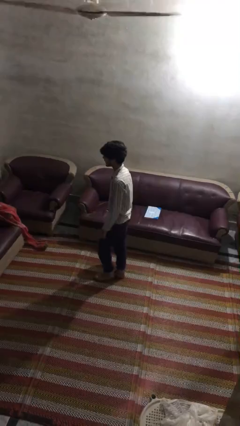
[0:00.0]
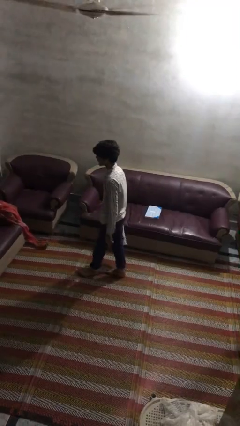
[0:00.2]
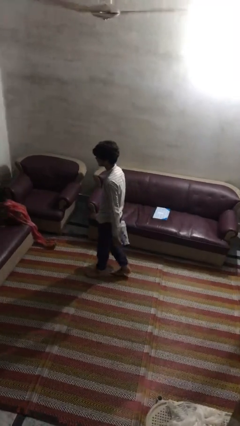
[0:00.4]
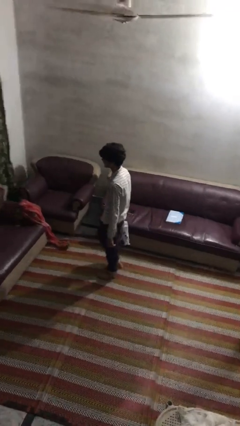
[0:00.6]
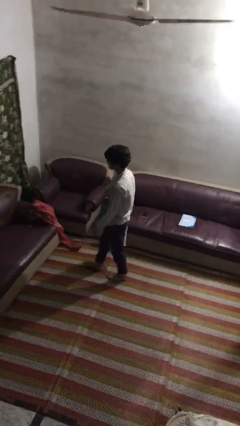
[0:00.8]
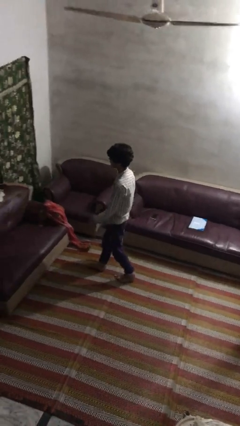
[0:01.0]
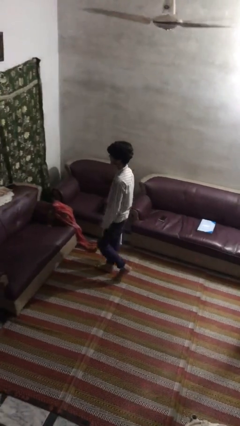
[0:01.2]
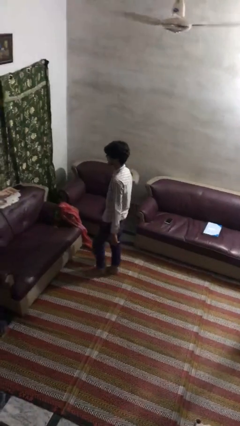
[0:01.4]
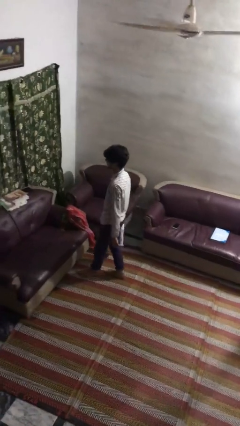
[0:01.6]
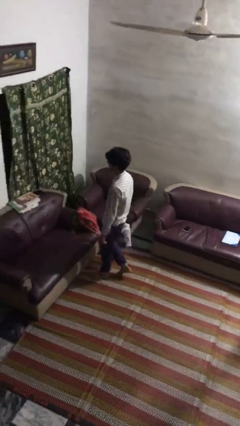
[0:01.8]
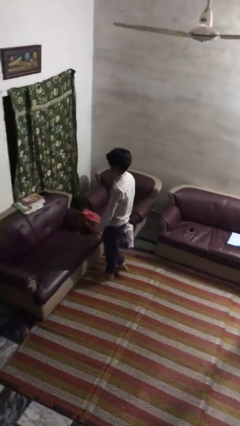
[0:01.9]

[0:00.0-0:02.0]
person carries groceries

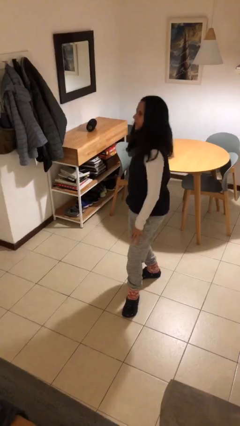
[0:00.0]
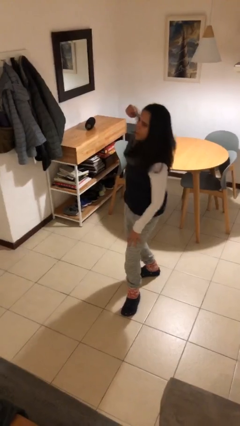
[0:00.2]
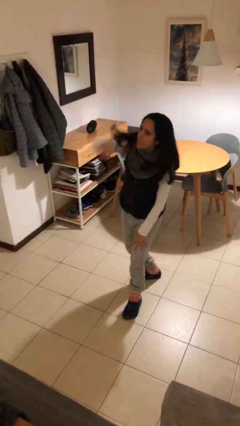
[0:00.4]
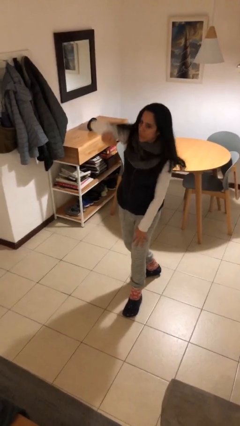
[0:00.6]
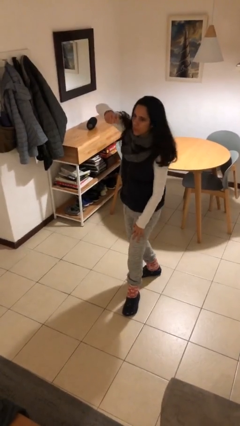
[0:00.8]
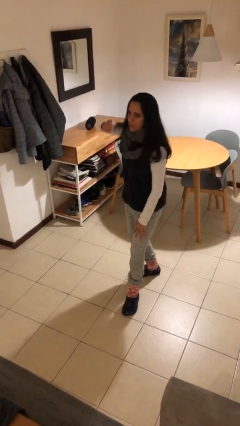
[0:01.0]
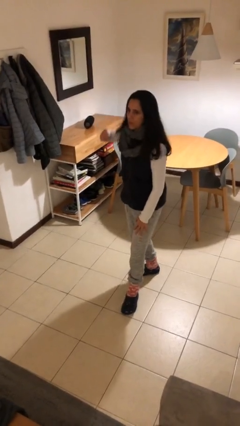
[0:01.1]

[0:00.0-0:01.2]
person punches

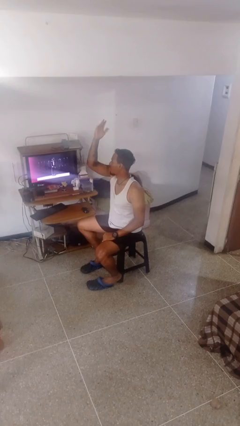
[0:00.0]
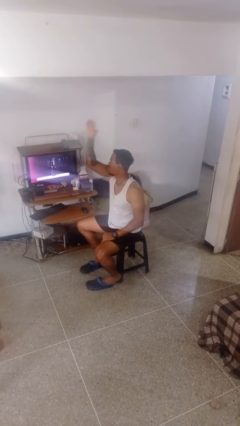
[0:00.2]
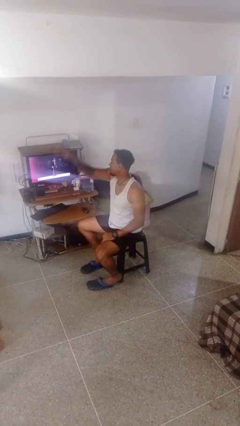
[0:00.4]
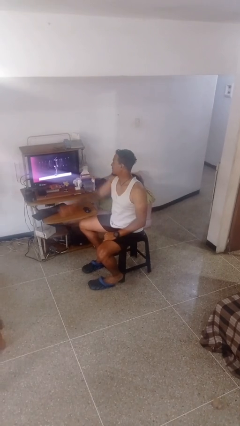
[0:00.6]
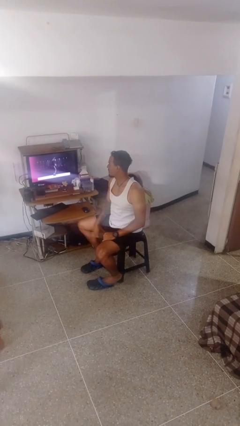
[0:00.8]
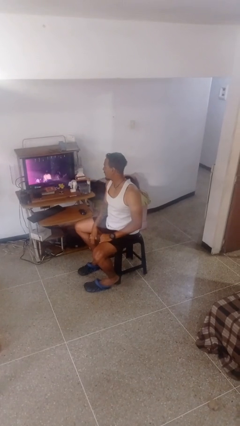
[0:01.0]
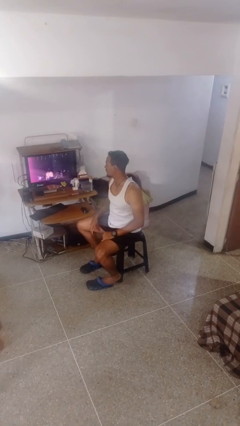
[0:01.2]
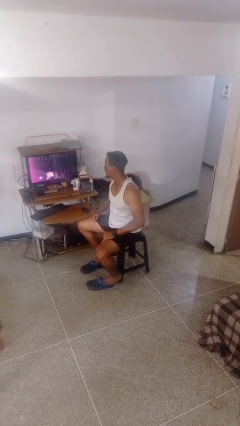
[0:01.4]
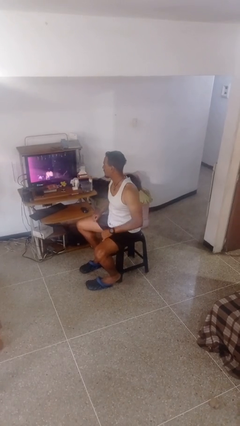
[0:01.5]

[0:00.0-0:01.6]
person gestures swipe down

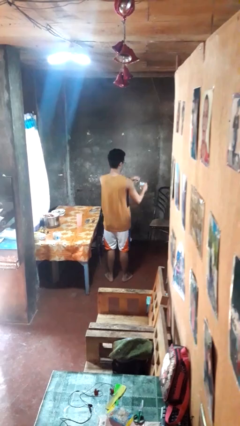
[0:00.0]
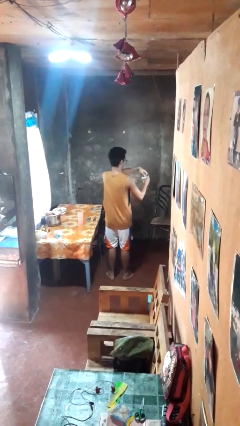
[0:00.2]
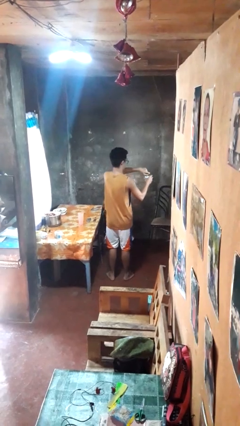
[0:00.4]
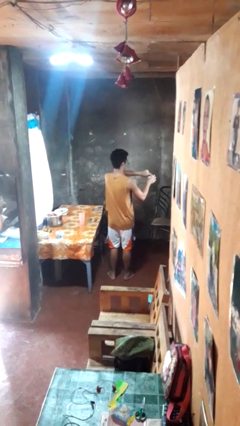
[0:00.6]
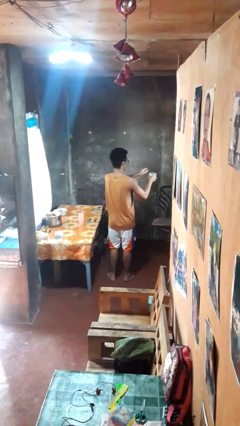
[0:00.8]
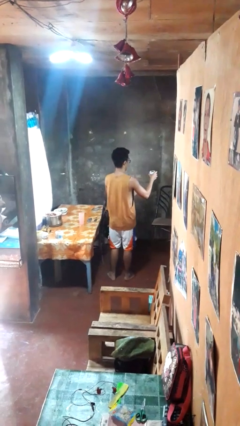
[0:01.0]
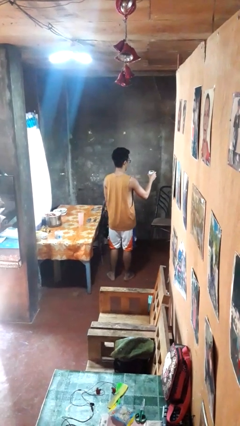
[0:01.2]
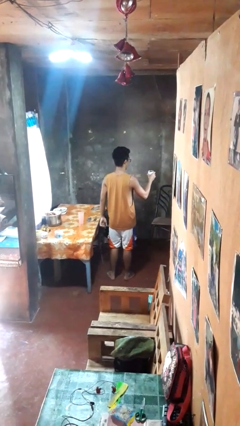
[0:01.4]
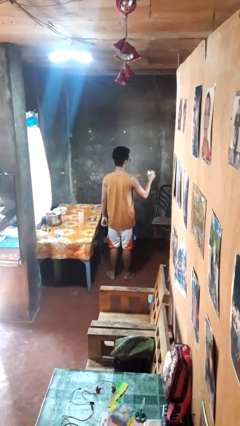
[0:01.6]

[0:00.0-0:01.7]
person opens beverage can

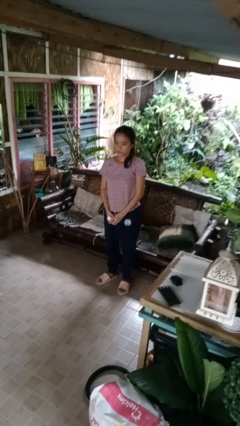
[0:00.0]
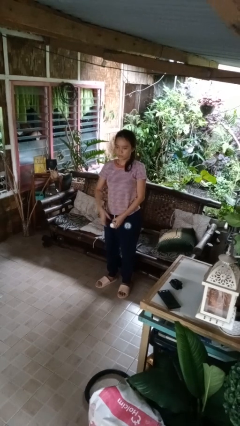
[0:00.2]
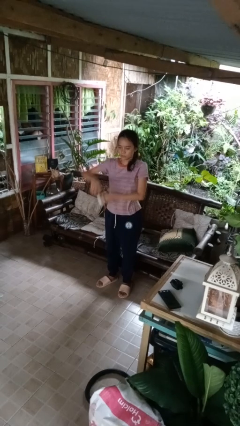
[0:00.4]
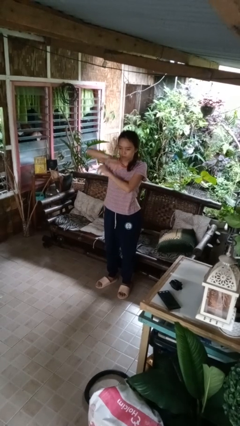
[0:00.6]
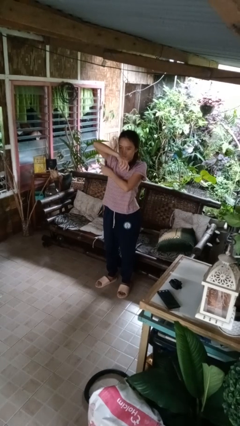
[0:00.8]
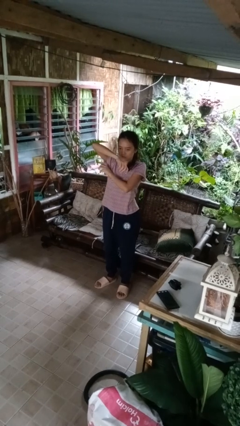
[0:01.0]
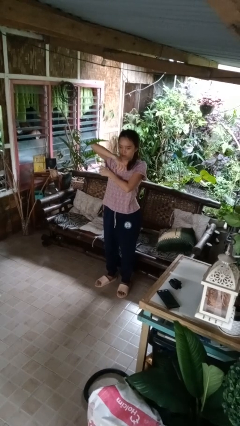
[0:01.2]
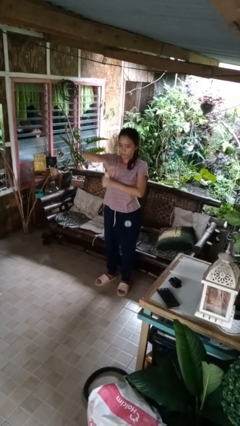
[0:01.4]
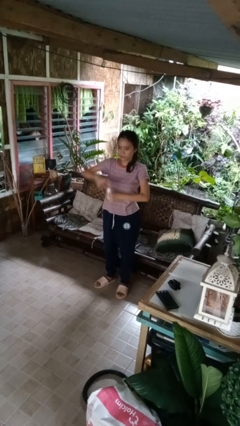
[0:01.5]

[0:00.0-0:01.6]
person applies deodorant

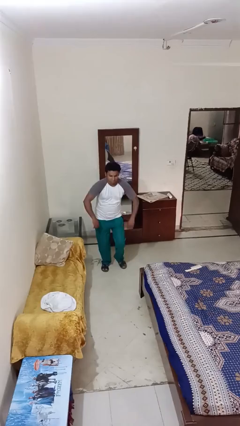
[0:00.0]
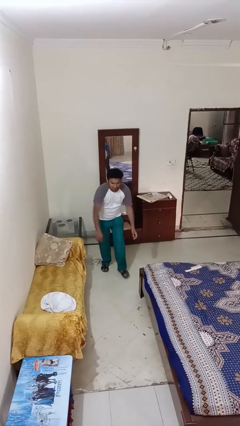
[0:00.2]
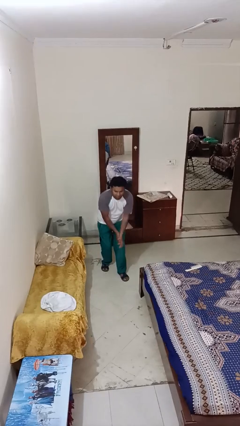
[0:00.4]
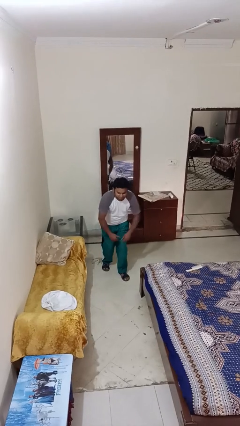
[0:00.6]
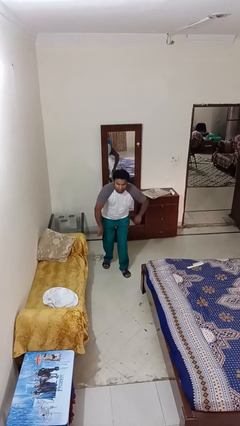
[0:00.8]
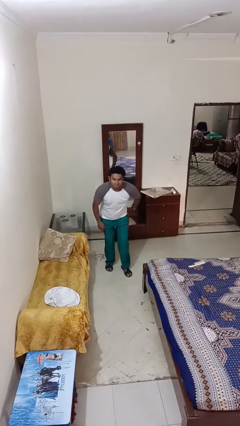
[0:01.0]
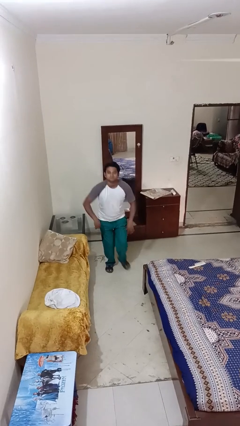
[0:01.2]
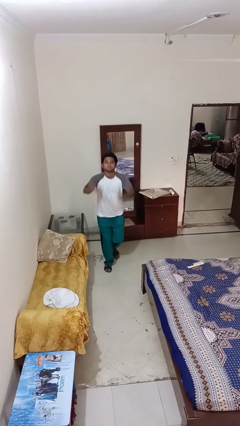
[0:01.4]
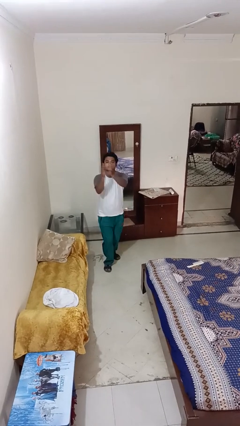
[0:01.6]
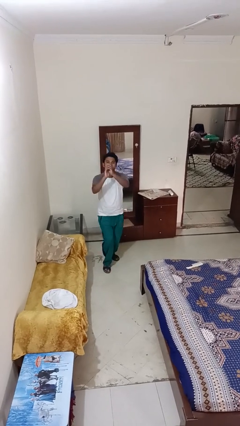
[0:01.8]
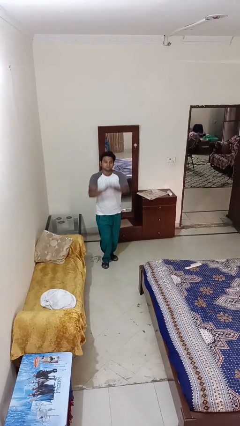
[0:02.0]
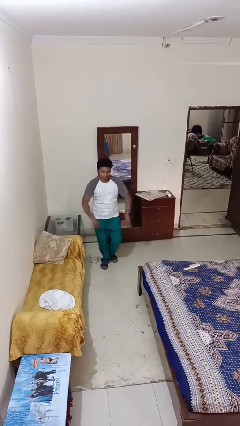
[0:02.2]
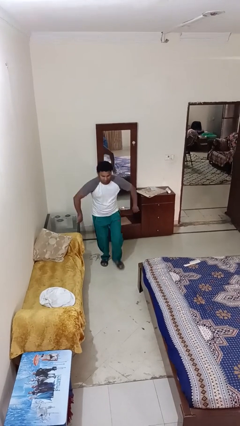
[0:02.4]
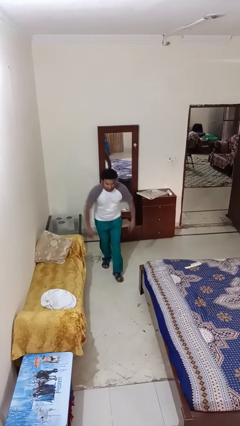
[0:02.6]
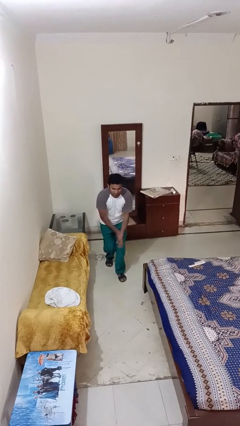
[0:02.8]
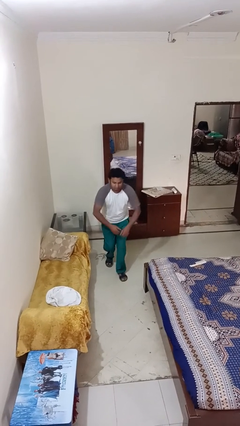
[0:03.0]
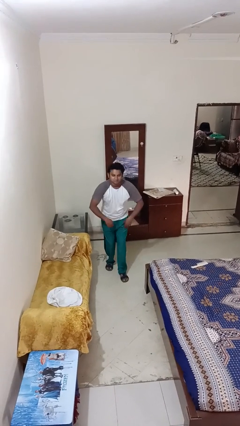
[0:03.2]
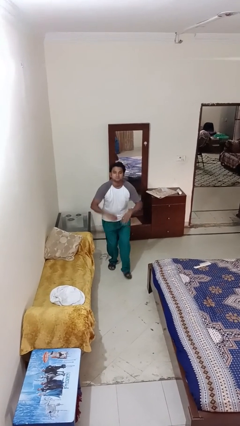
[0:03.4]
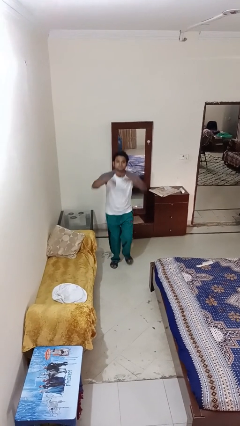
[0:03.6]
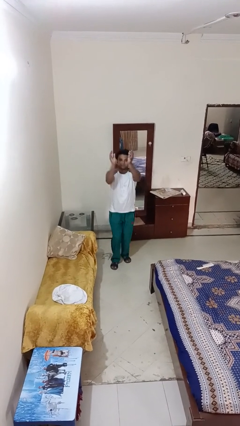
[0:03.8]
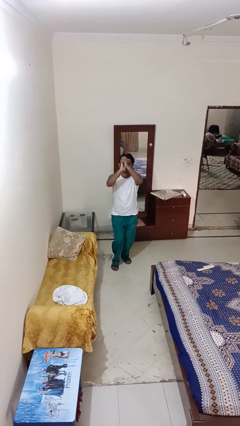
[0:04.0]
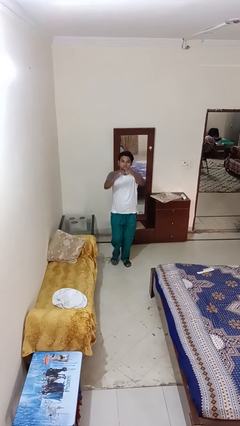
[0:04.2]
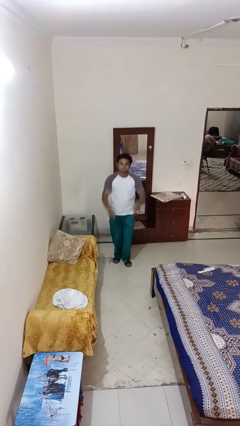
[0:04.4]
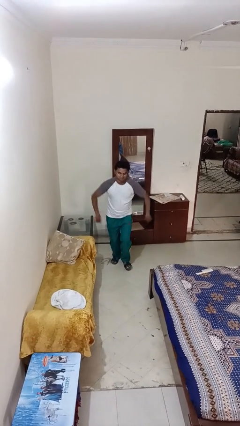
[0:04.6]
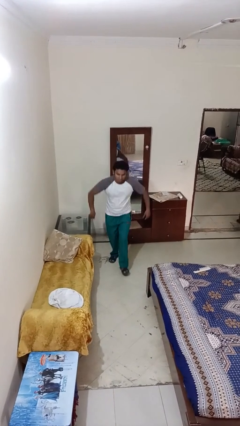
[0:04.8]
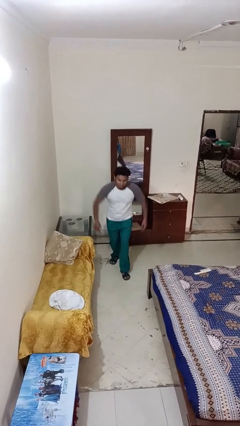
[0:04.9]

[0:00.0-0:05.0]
person dances in place

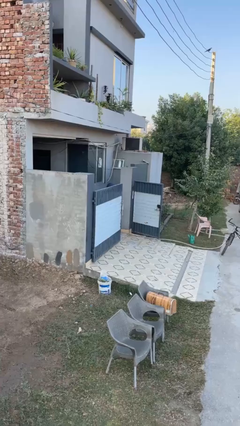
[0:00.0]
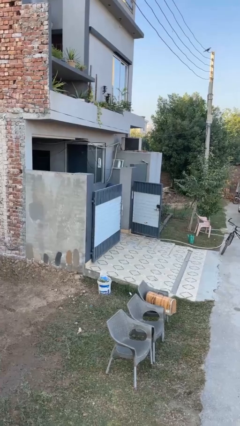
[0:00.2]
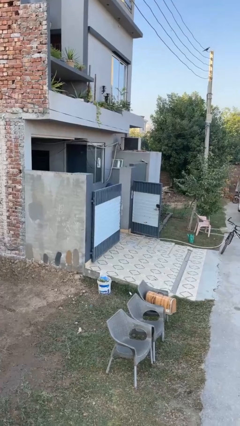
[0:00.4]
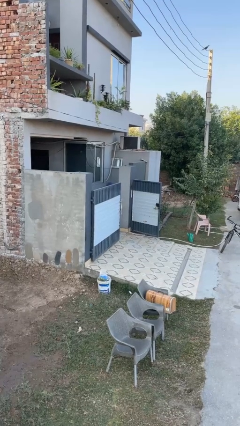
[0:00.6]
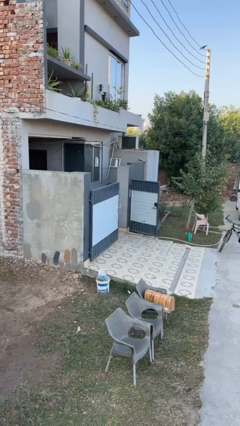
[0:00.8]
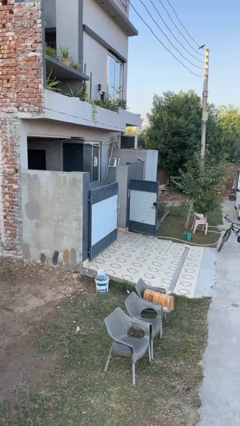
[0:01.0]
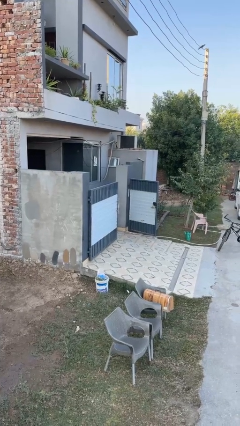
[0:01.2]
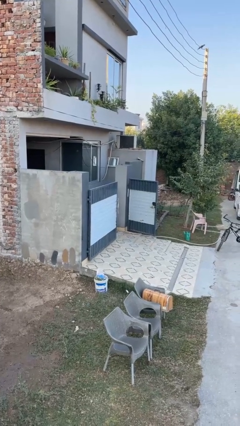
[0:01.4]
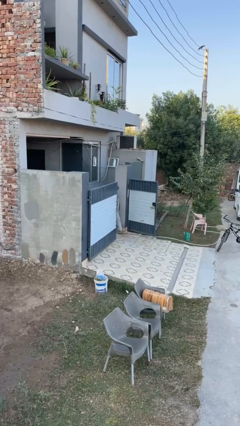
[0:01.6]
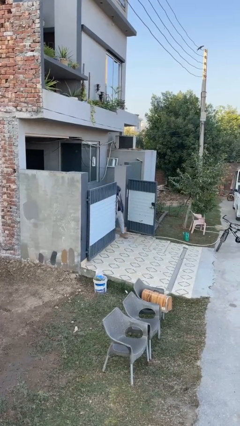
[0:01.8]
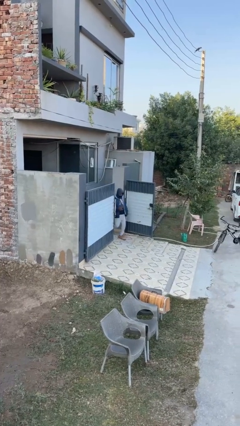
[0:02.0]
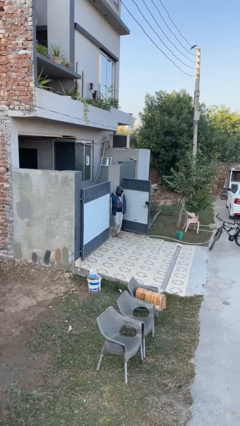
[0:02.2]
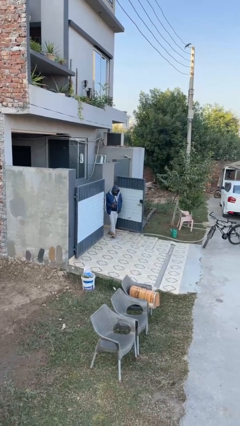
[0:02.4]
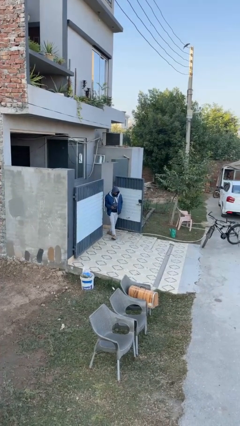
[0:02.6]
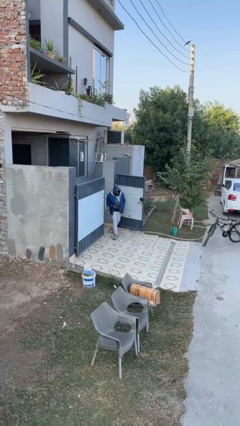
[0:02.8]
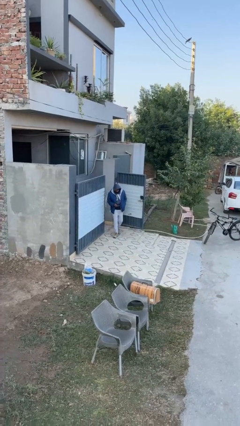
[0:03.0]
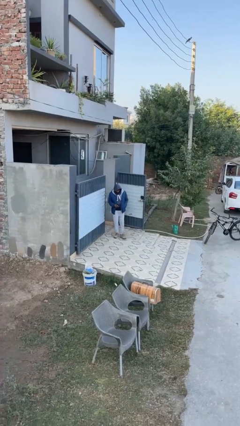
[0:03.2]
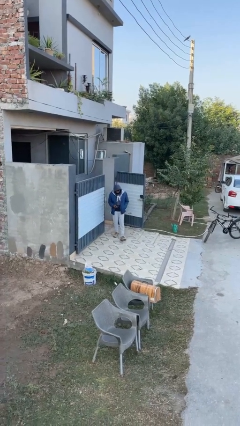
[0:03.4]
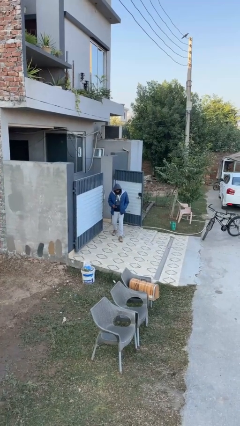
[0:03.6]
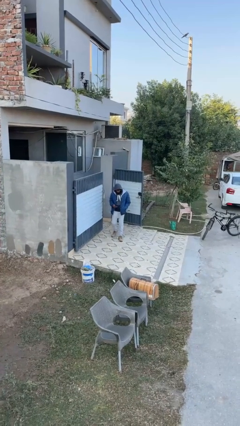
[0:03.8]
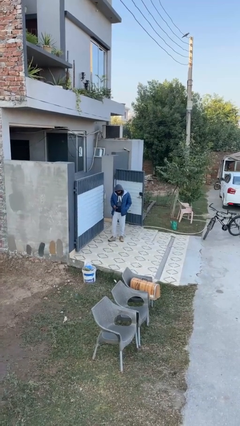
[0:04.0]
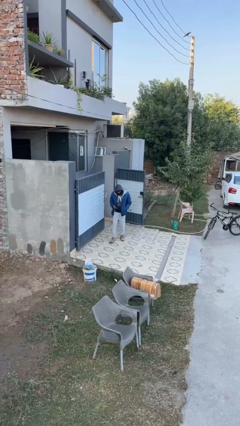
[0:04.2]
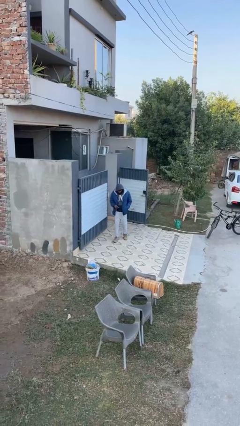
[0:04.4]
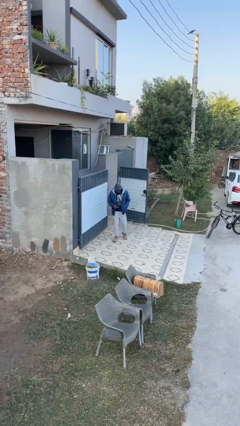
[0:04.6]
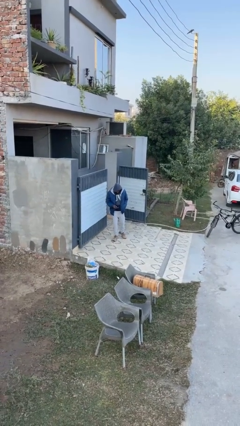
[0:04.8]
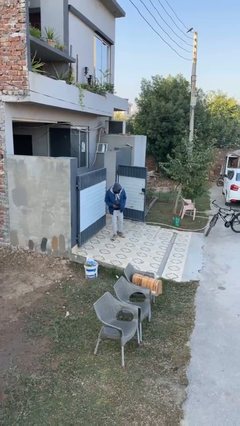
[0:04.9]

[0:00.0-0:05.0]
person enters scene through structure
